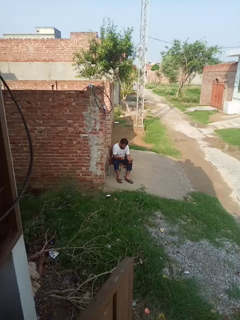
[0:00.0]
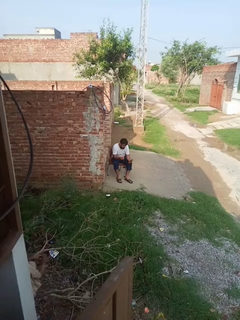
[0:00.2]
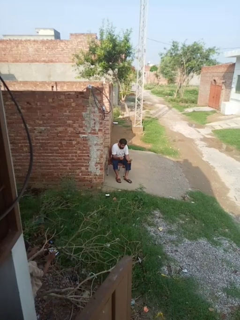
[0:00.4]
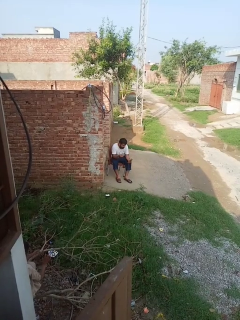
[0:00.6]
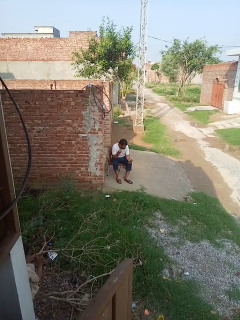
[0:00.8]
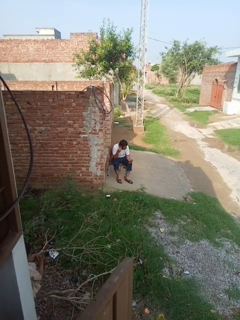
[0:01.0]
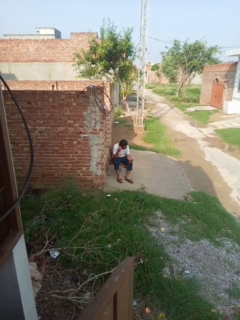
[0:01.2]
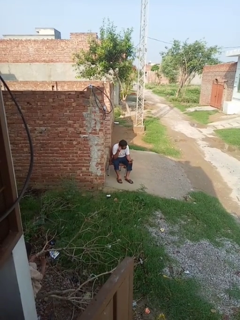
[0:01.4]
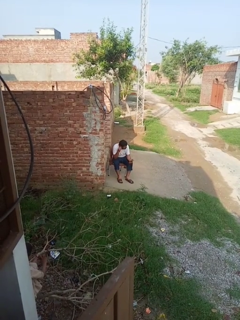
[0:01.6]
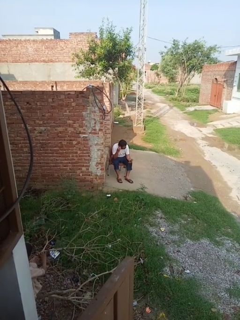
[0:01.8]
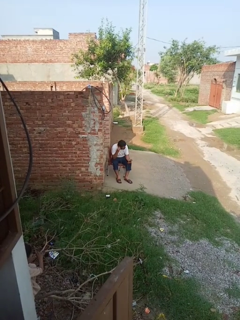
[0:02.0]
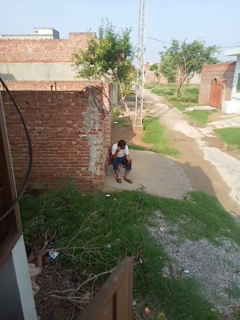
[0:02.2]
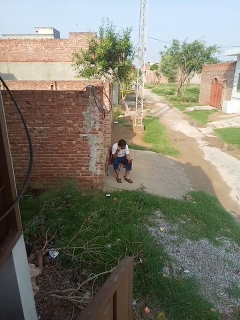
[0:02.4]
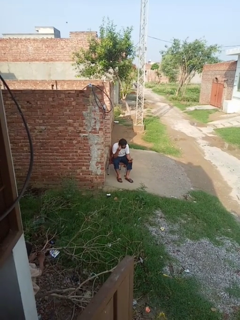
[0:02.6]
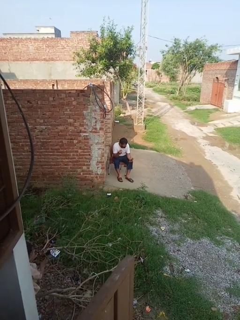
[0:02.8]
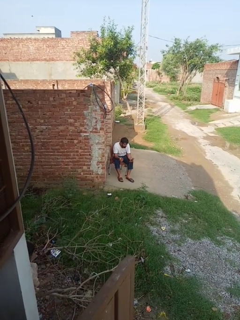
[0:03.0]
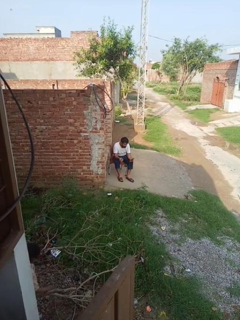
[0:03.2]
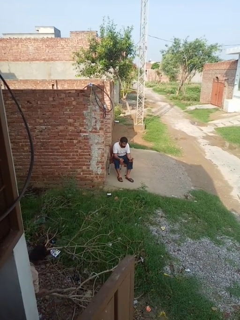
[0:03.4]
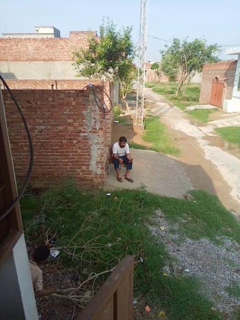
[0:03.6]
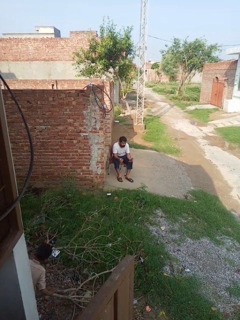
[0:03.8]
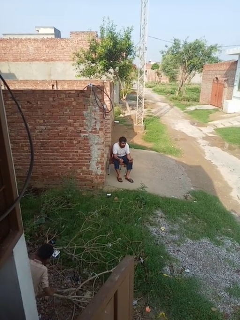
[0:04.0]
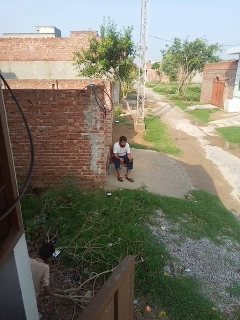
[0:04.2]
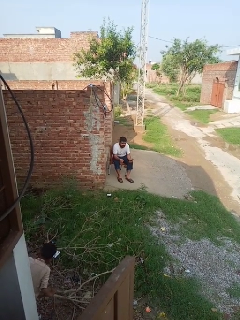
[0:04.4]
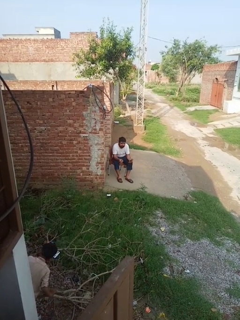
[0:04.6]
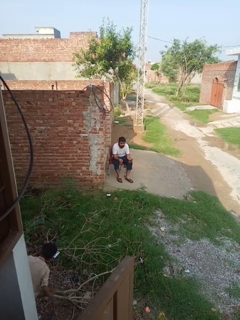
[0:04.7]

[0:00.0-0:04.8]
person puts on headphones

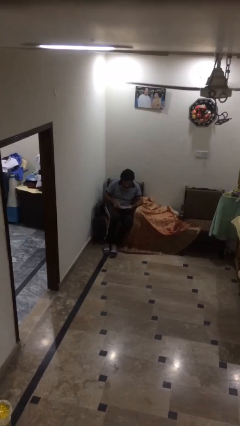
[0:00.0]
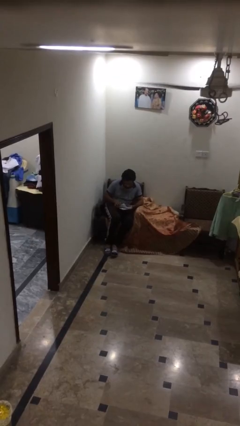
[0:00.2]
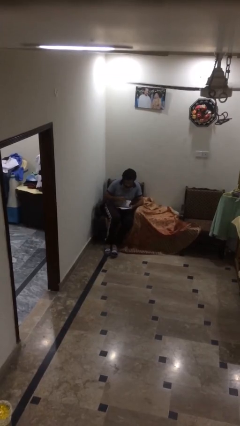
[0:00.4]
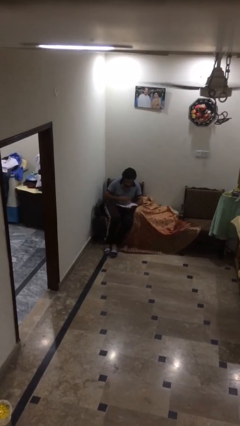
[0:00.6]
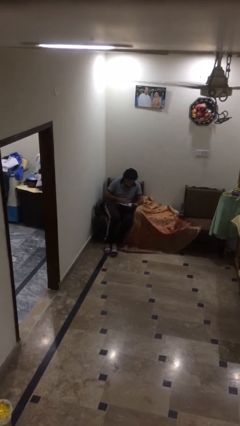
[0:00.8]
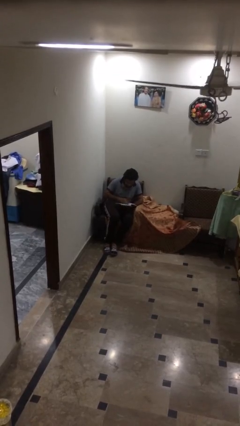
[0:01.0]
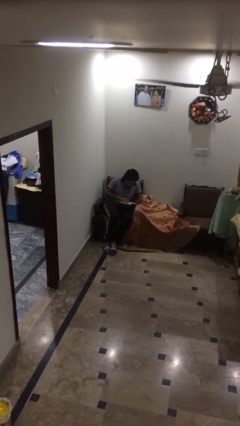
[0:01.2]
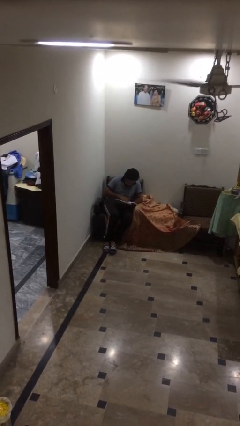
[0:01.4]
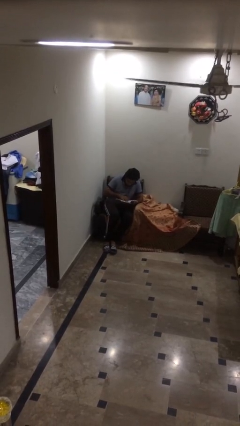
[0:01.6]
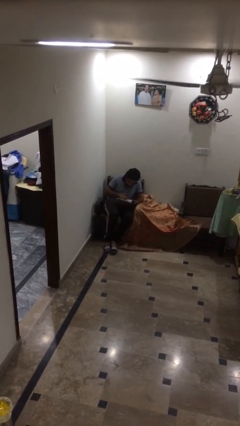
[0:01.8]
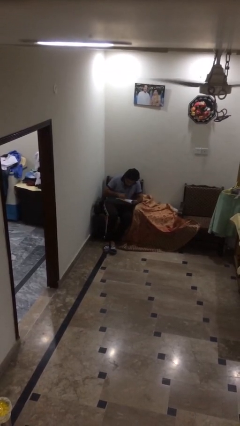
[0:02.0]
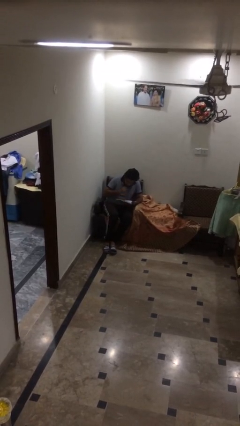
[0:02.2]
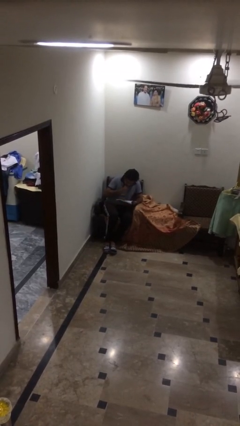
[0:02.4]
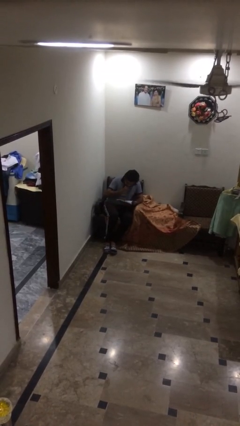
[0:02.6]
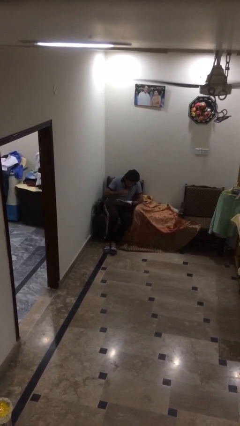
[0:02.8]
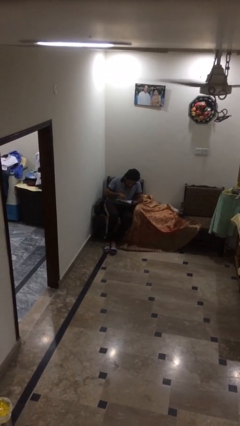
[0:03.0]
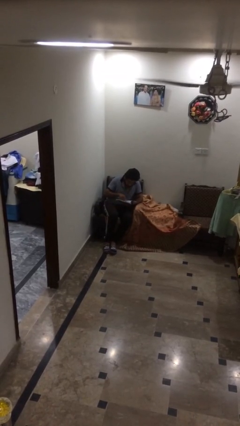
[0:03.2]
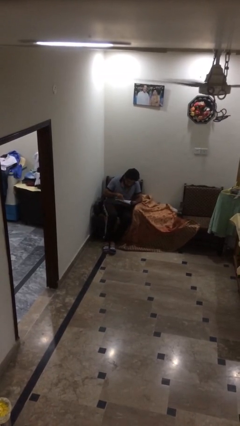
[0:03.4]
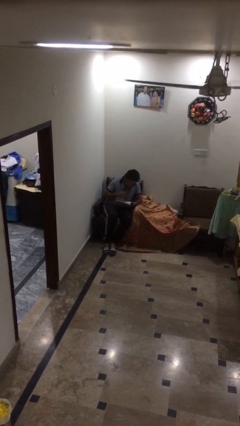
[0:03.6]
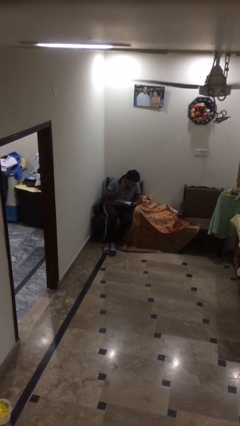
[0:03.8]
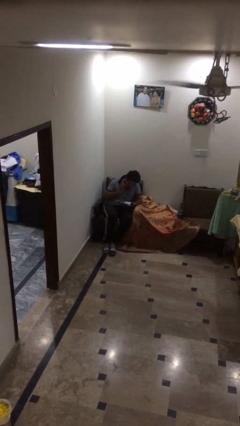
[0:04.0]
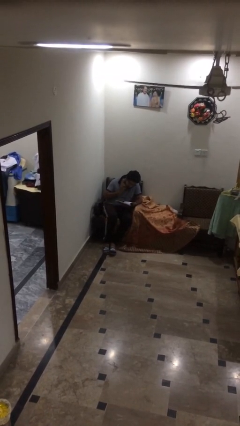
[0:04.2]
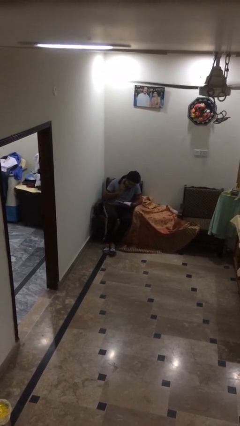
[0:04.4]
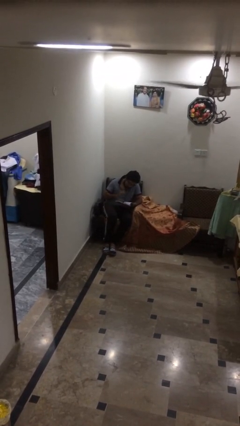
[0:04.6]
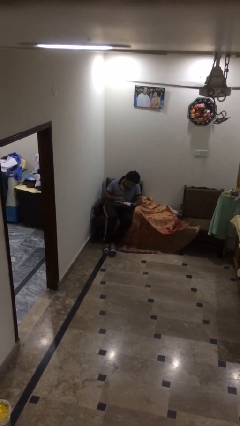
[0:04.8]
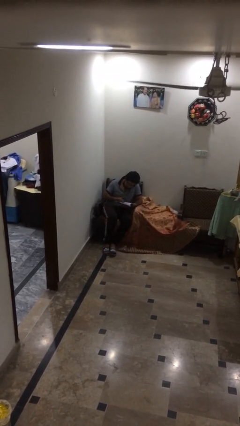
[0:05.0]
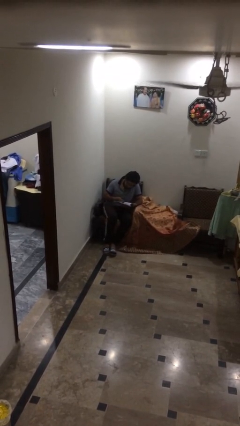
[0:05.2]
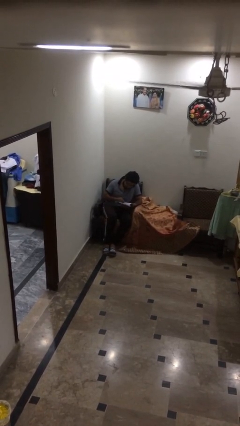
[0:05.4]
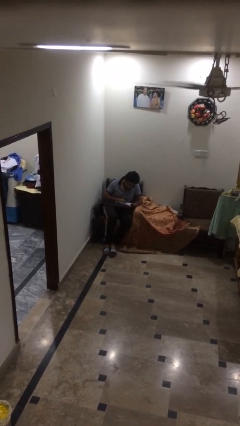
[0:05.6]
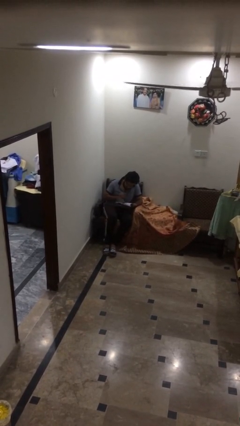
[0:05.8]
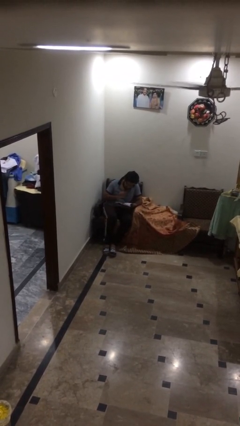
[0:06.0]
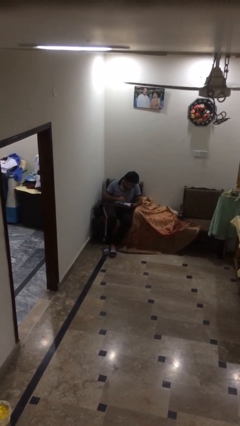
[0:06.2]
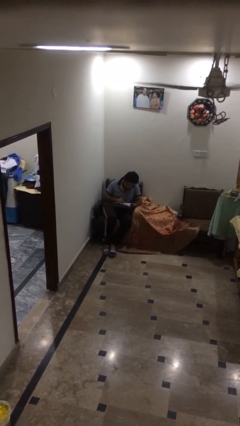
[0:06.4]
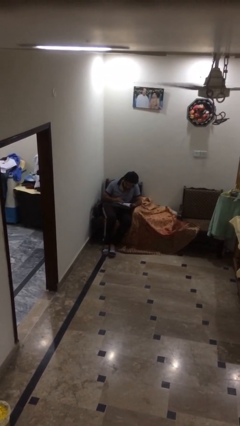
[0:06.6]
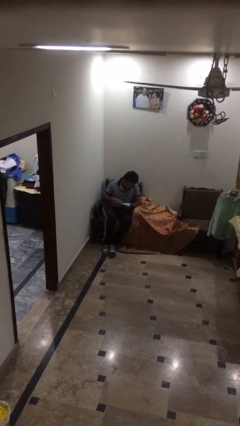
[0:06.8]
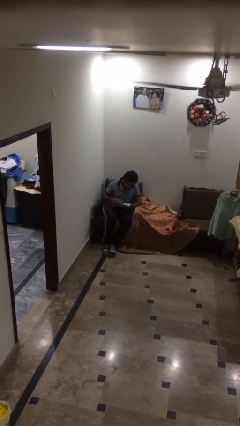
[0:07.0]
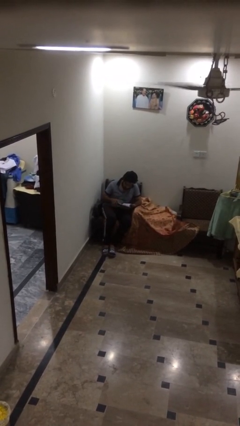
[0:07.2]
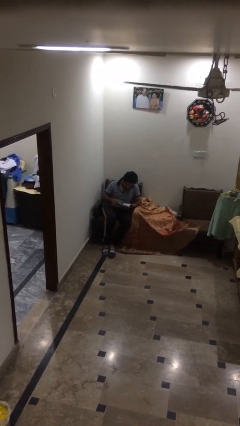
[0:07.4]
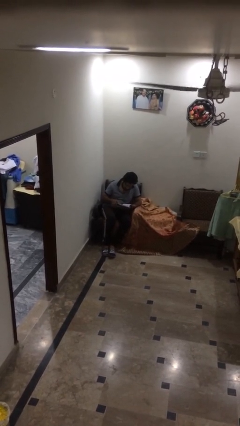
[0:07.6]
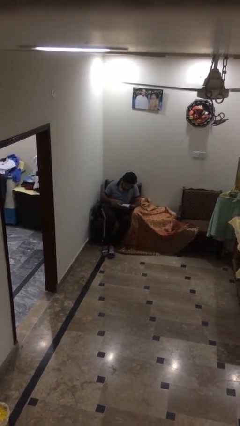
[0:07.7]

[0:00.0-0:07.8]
person reads document

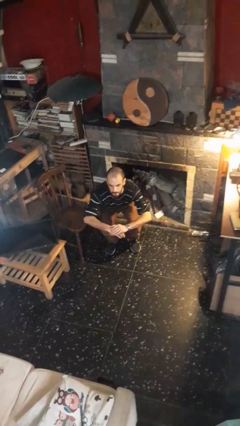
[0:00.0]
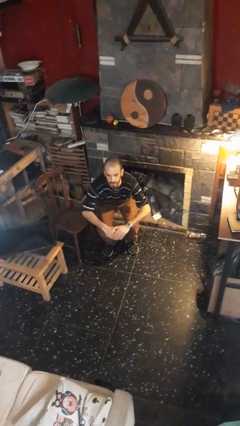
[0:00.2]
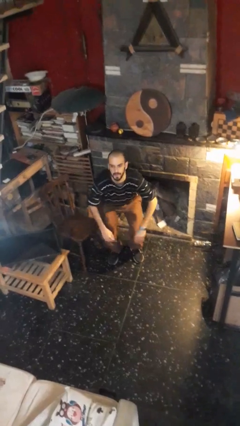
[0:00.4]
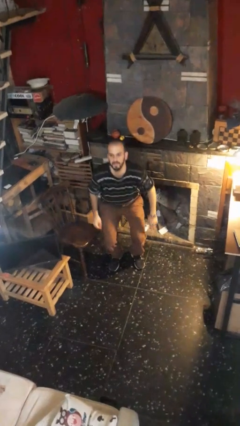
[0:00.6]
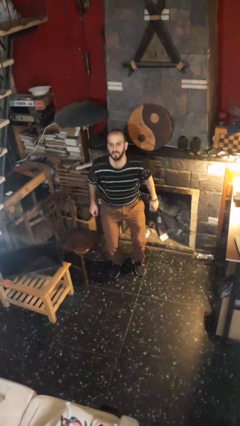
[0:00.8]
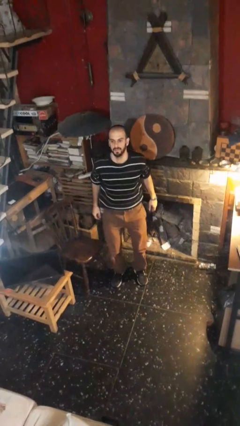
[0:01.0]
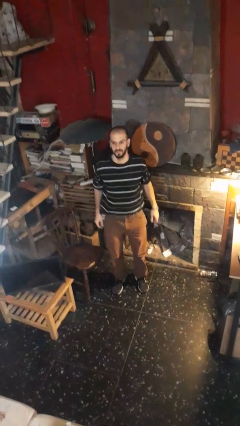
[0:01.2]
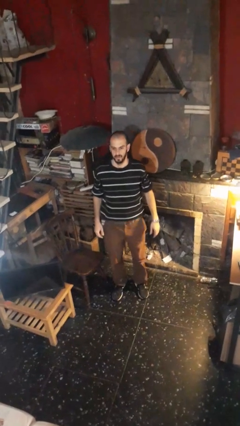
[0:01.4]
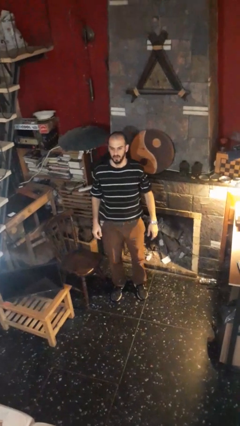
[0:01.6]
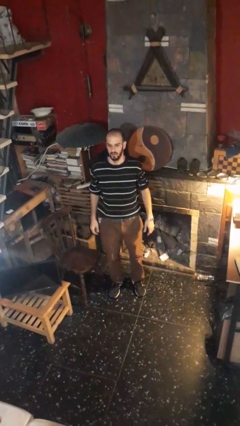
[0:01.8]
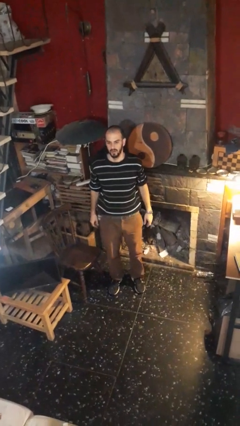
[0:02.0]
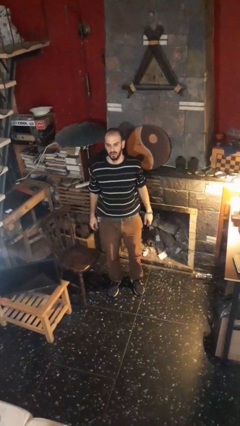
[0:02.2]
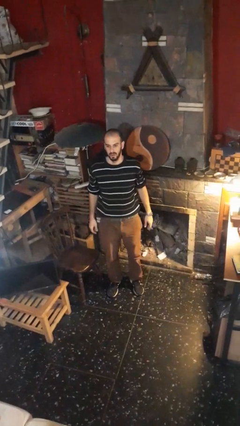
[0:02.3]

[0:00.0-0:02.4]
person stands up

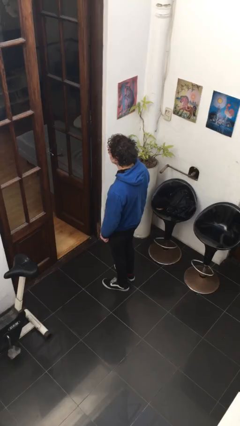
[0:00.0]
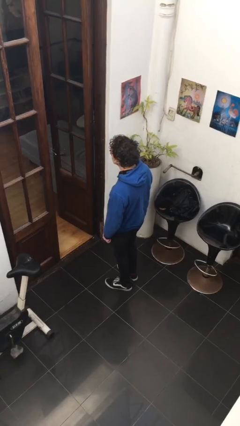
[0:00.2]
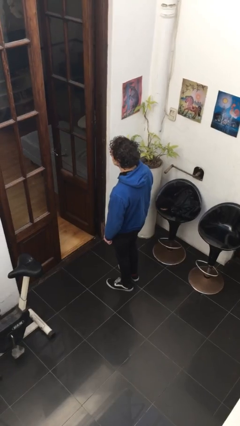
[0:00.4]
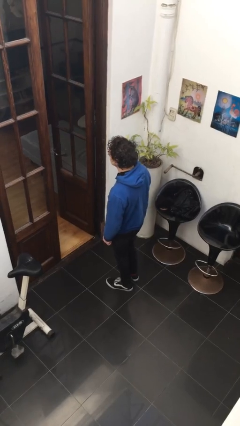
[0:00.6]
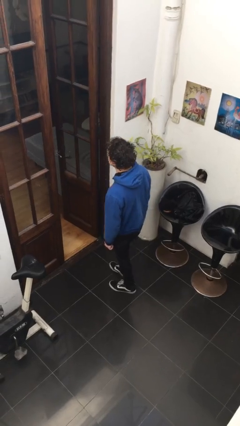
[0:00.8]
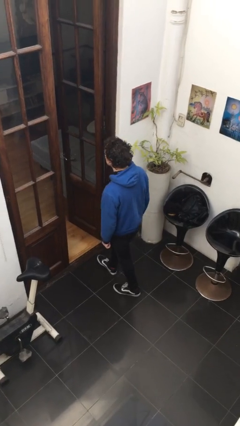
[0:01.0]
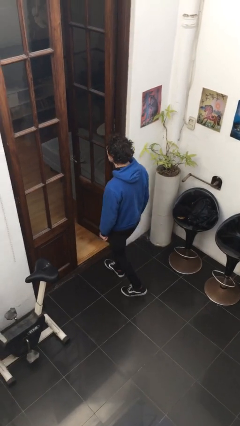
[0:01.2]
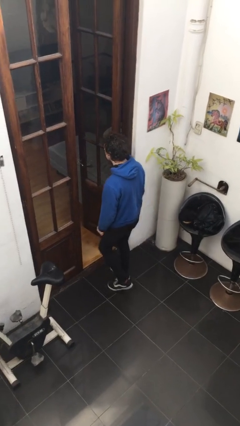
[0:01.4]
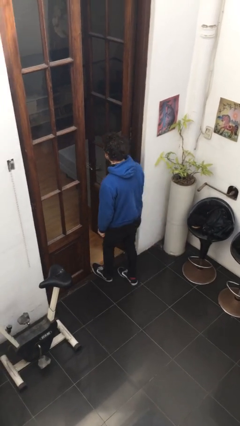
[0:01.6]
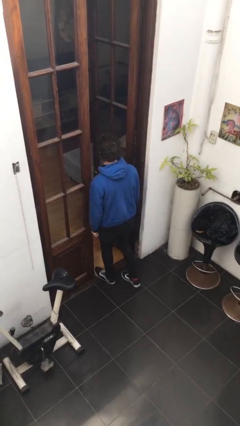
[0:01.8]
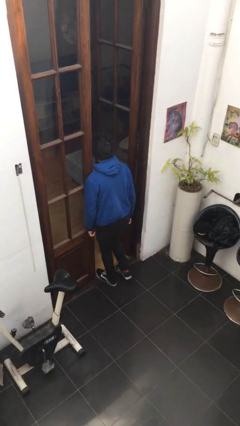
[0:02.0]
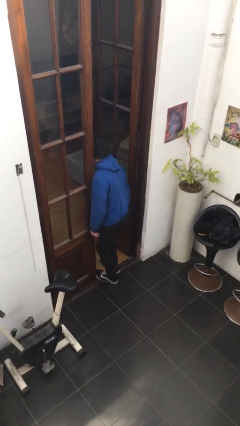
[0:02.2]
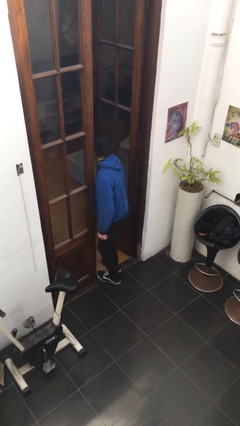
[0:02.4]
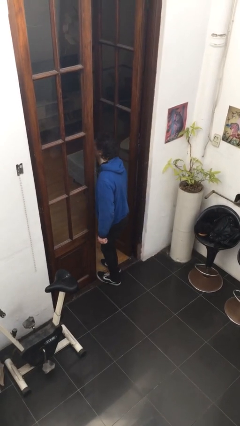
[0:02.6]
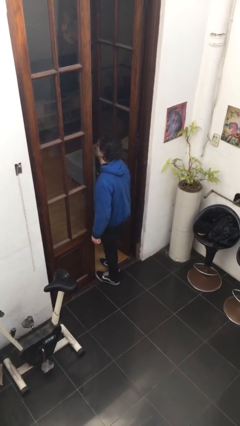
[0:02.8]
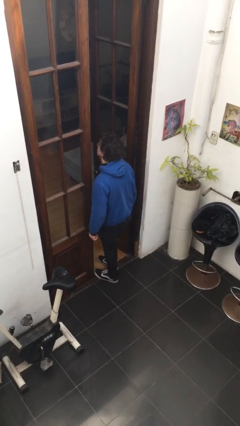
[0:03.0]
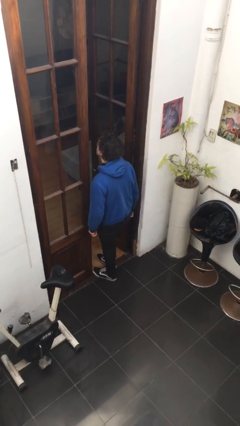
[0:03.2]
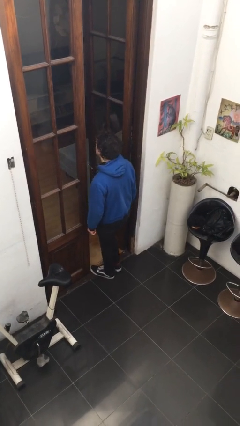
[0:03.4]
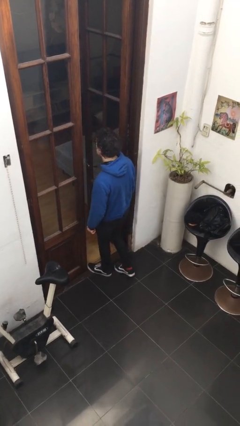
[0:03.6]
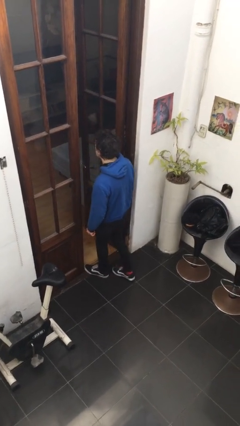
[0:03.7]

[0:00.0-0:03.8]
person bumps into wall

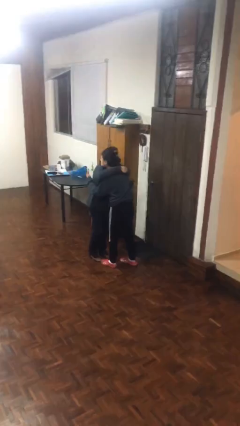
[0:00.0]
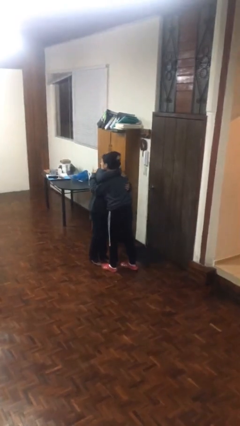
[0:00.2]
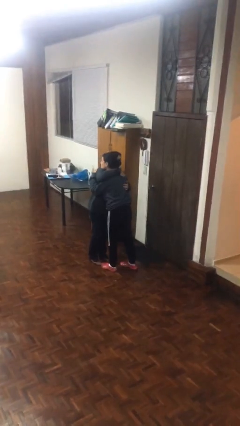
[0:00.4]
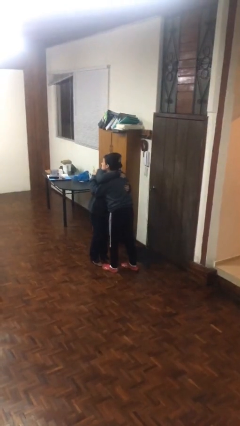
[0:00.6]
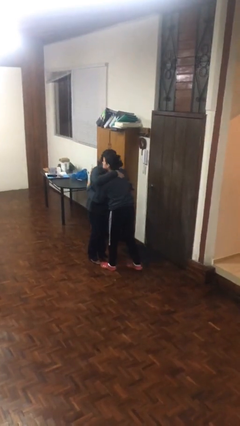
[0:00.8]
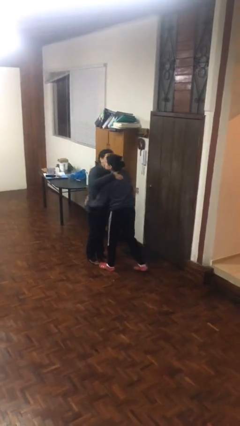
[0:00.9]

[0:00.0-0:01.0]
person embraces person
